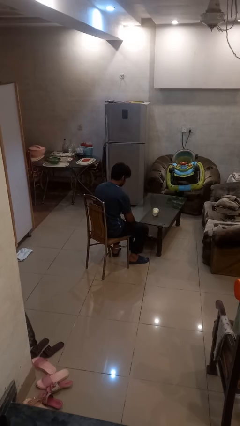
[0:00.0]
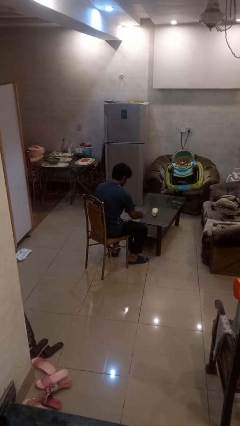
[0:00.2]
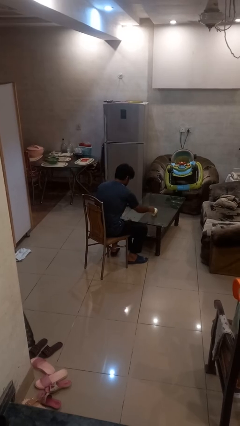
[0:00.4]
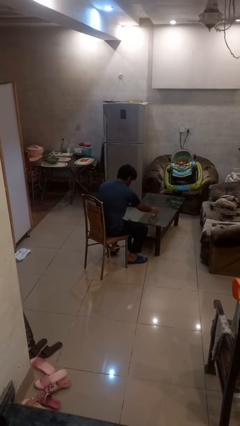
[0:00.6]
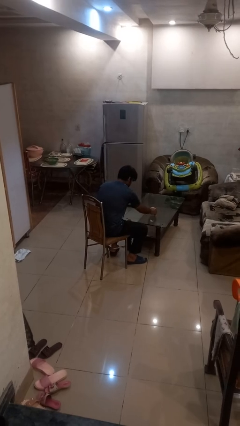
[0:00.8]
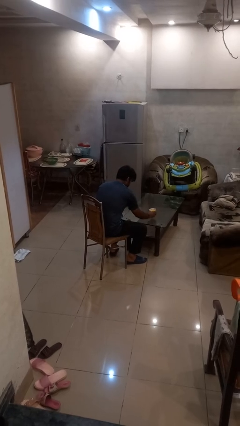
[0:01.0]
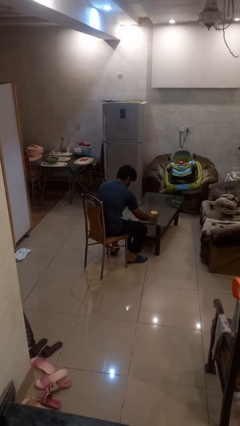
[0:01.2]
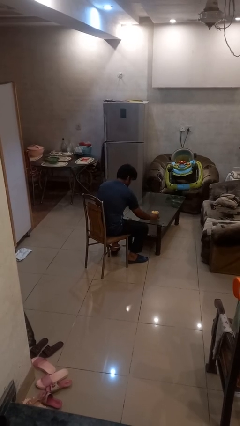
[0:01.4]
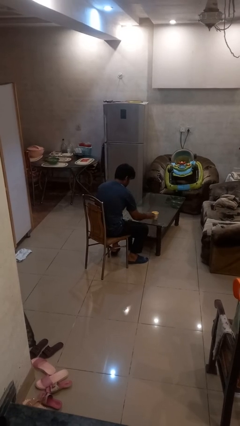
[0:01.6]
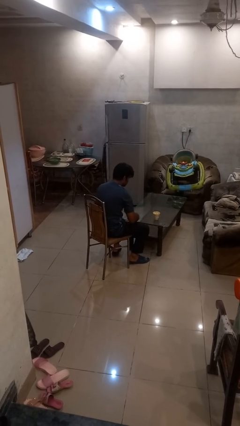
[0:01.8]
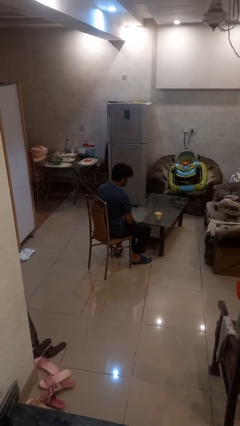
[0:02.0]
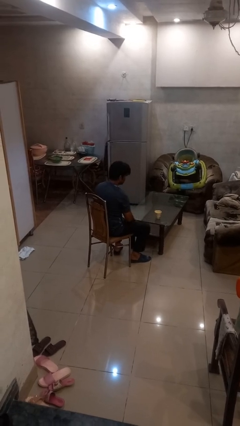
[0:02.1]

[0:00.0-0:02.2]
person sets upright glass

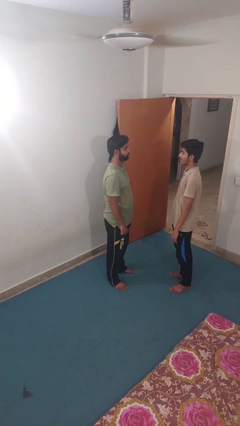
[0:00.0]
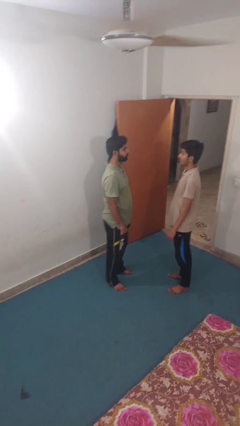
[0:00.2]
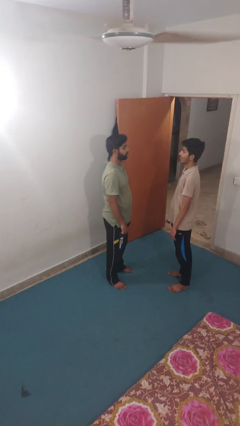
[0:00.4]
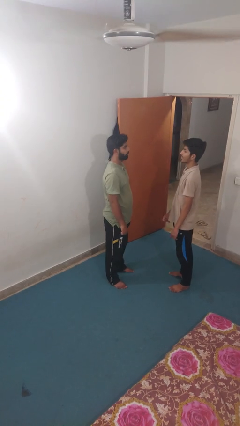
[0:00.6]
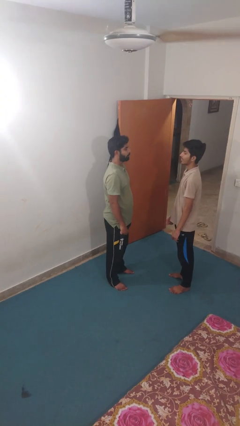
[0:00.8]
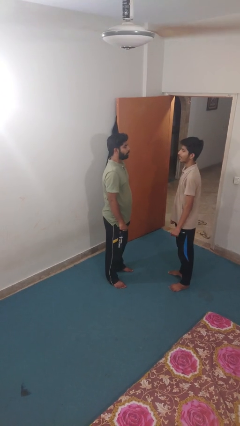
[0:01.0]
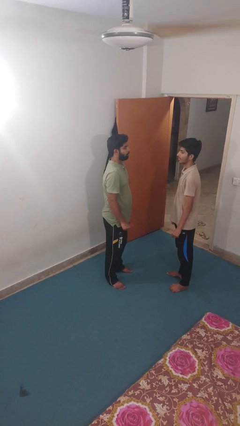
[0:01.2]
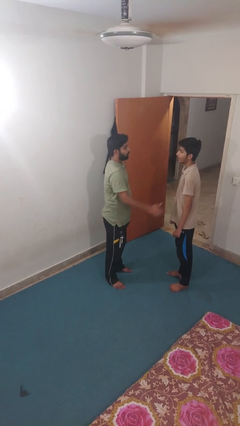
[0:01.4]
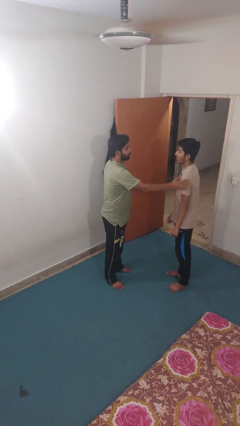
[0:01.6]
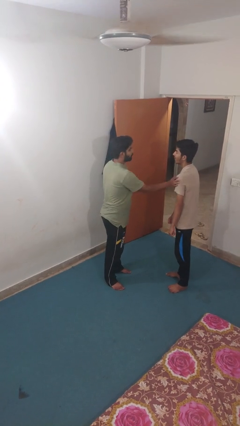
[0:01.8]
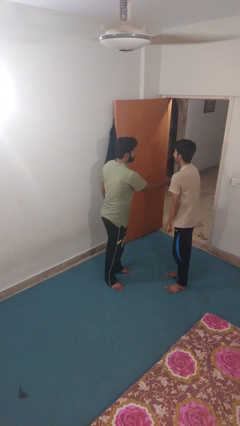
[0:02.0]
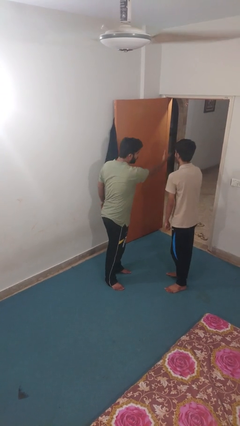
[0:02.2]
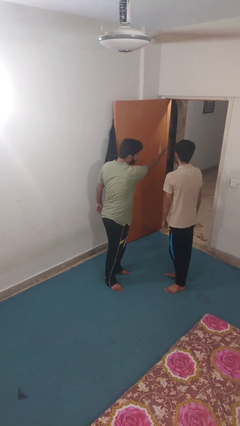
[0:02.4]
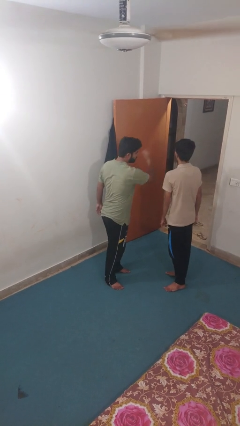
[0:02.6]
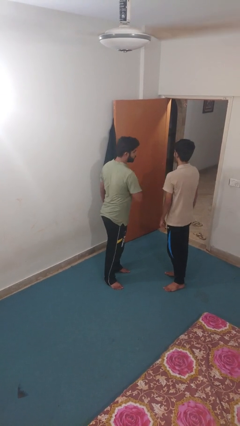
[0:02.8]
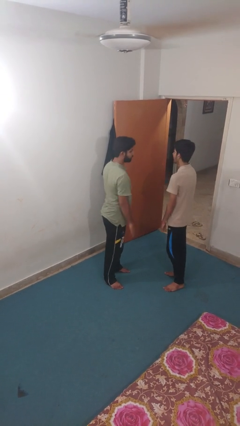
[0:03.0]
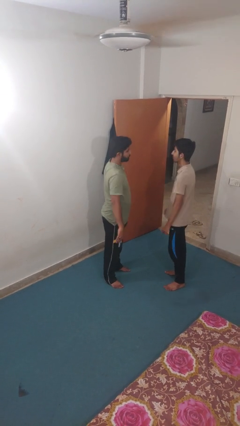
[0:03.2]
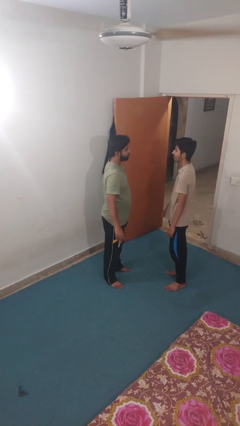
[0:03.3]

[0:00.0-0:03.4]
person shoves person

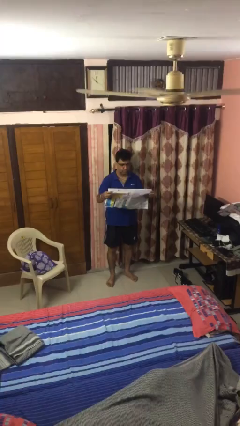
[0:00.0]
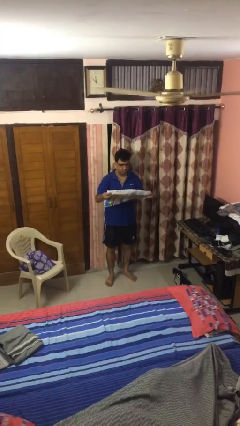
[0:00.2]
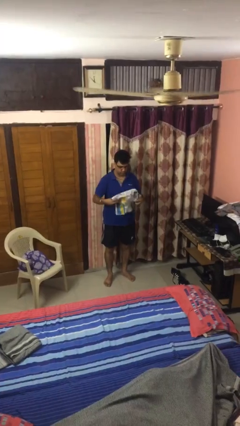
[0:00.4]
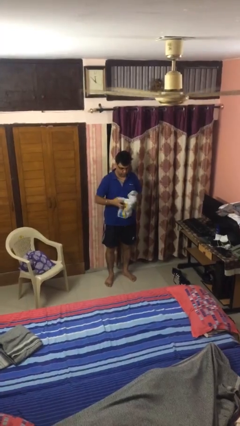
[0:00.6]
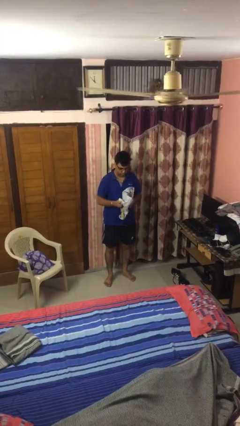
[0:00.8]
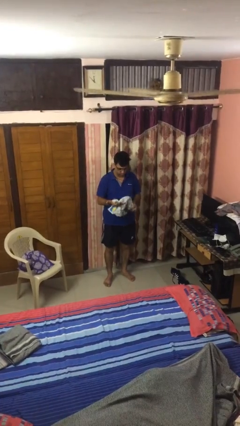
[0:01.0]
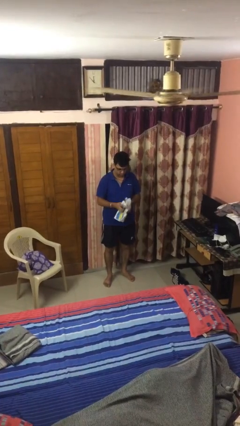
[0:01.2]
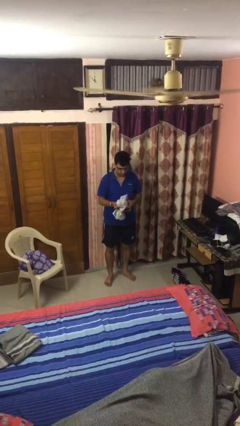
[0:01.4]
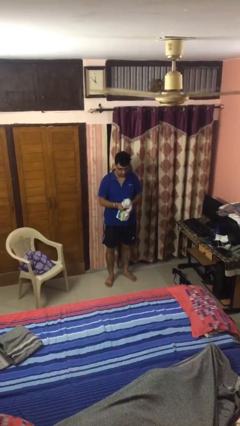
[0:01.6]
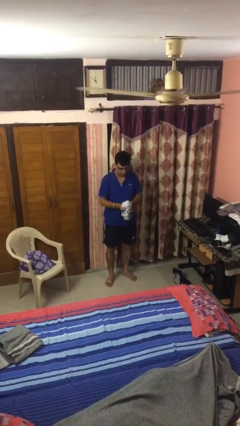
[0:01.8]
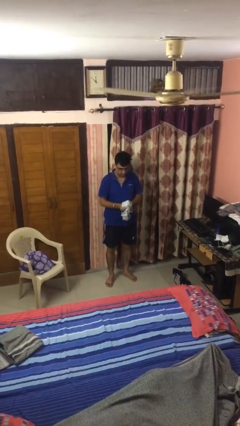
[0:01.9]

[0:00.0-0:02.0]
person crumples paper

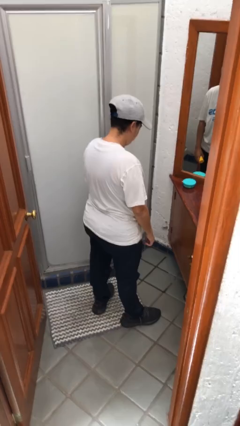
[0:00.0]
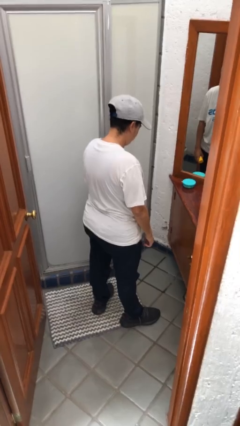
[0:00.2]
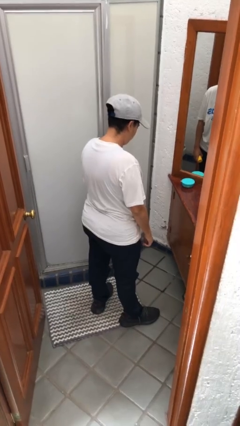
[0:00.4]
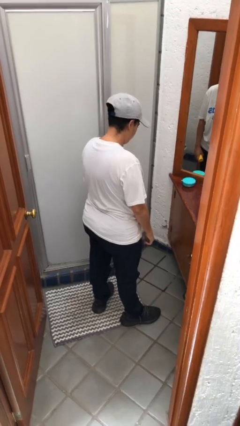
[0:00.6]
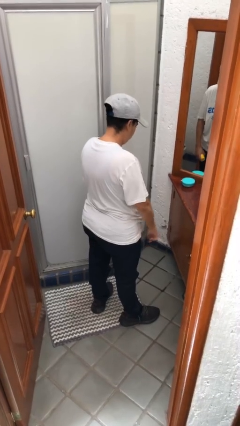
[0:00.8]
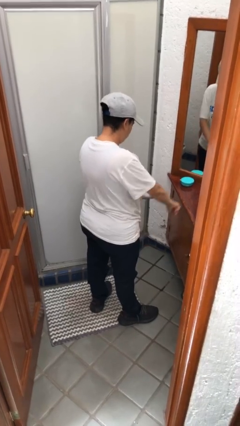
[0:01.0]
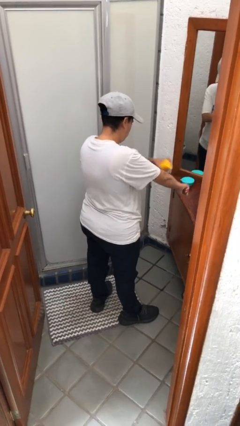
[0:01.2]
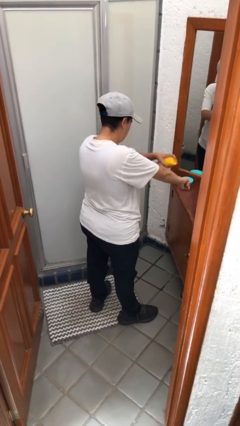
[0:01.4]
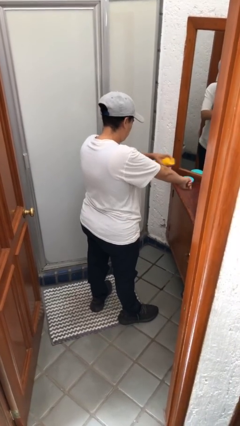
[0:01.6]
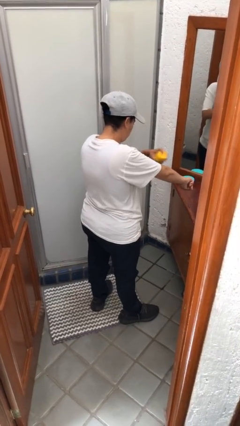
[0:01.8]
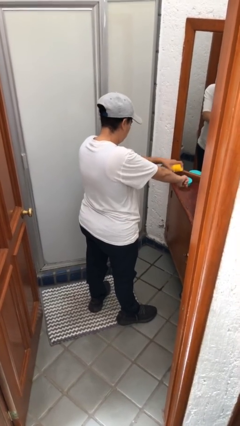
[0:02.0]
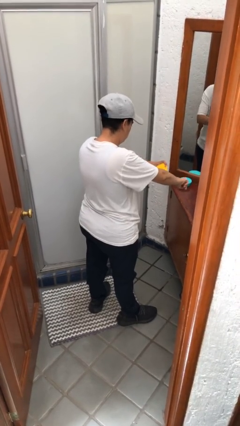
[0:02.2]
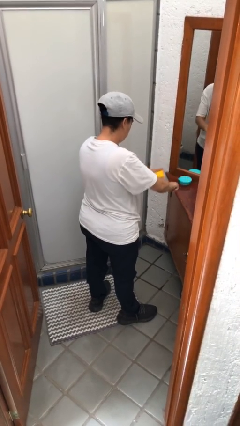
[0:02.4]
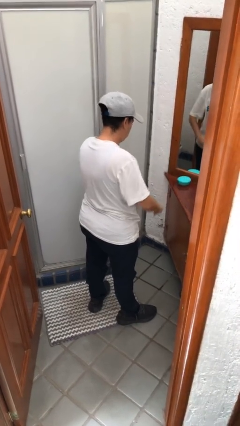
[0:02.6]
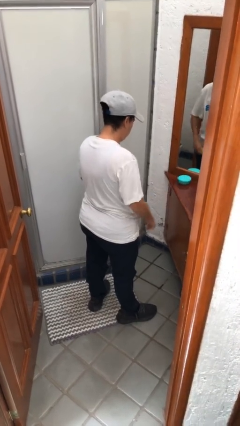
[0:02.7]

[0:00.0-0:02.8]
person applies sunscreen

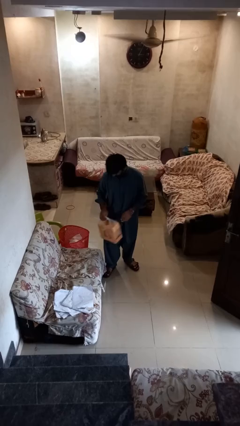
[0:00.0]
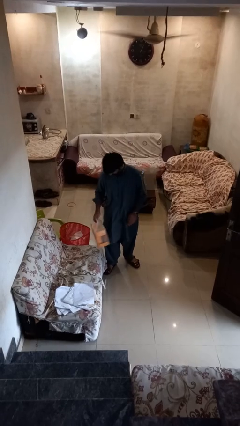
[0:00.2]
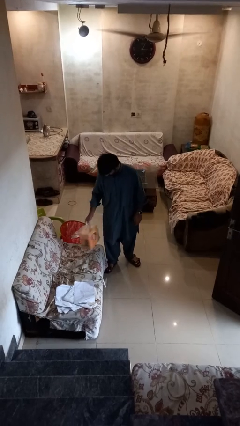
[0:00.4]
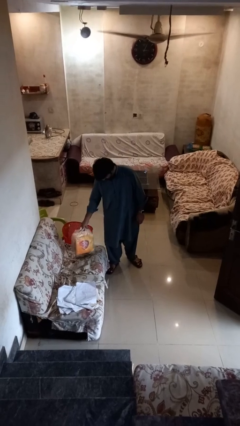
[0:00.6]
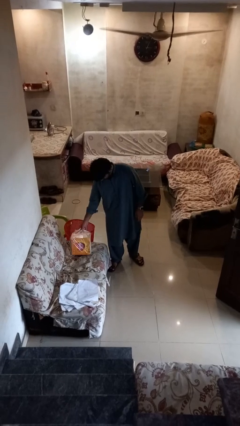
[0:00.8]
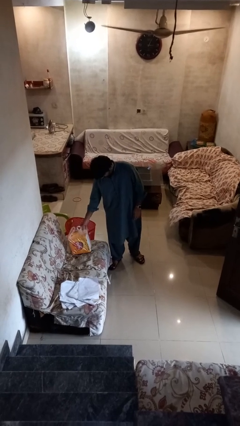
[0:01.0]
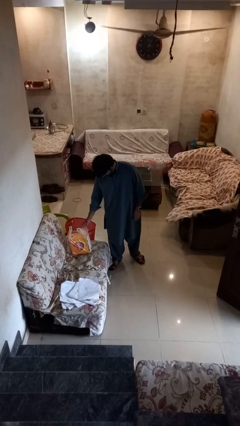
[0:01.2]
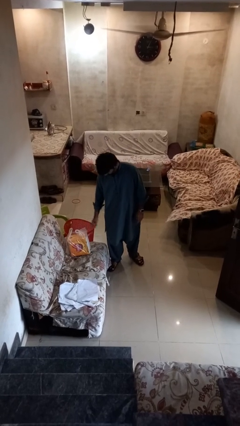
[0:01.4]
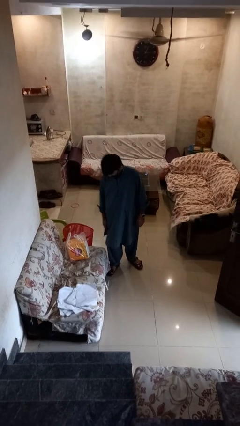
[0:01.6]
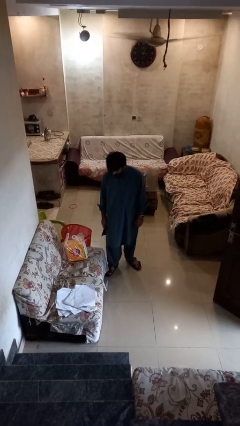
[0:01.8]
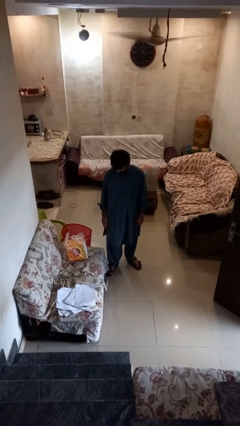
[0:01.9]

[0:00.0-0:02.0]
person puts down object on couch

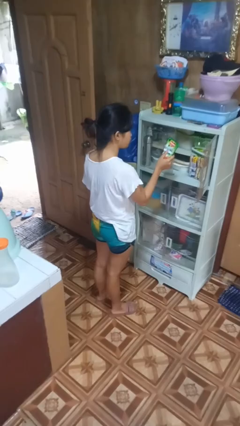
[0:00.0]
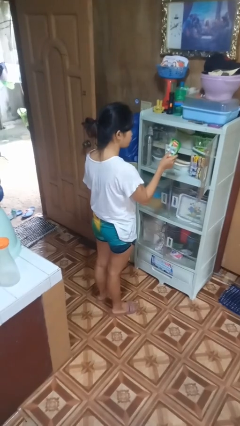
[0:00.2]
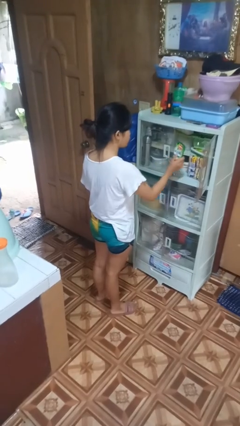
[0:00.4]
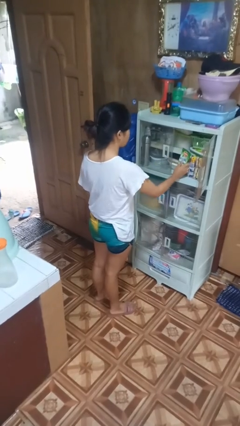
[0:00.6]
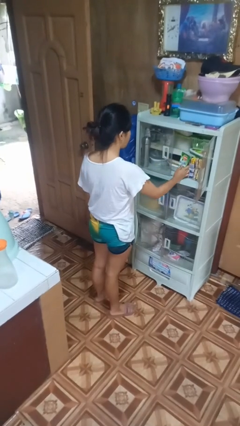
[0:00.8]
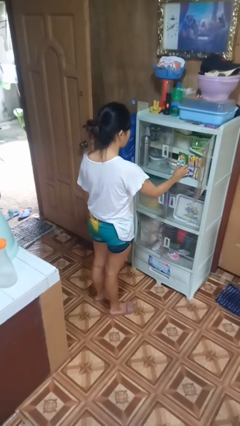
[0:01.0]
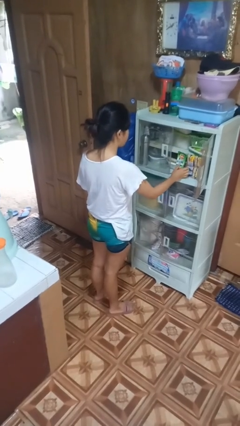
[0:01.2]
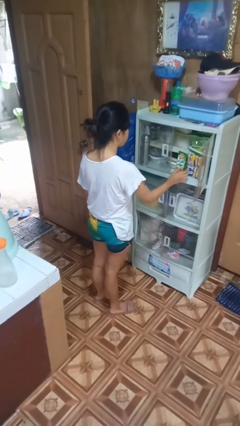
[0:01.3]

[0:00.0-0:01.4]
person puts down object into cabinet

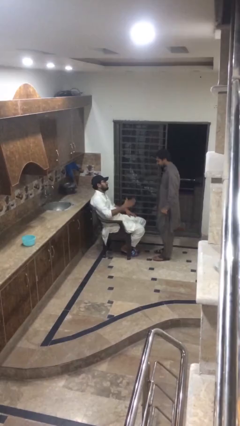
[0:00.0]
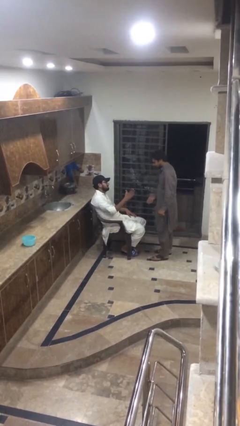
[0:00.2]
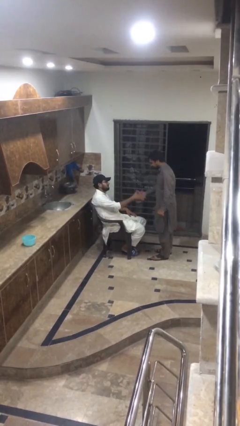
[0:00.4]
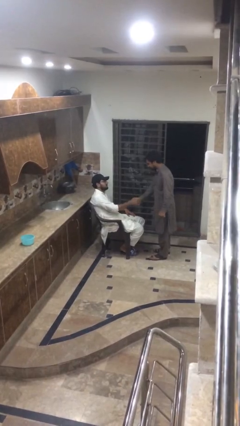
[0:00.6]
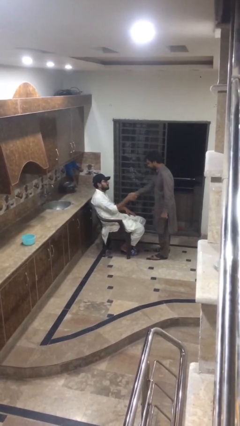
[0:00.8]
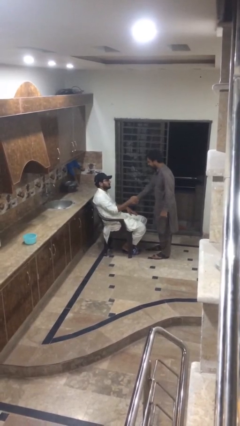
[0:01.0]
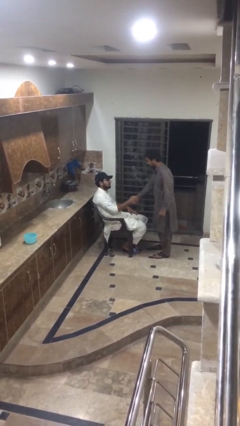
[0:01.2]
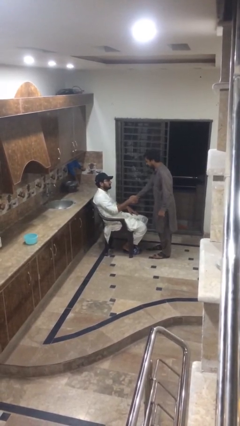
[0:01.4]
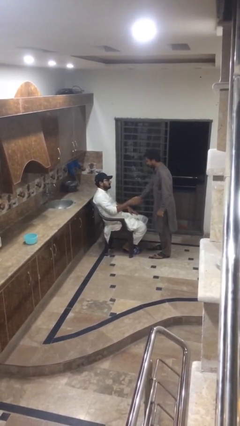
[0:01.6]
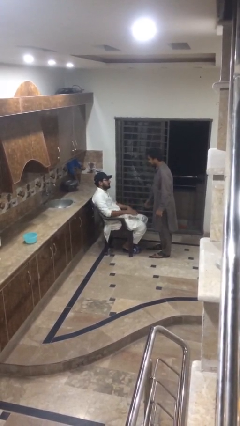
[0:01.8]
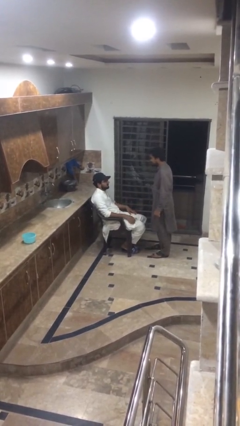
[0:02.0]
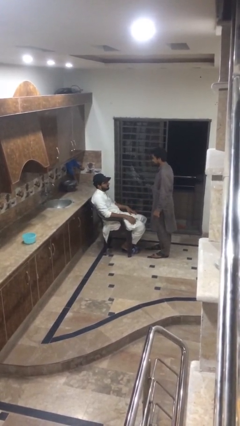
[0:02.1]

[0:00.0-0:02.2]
person shakes hand

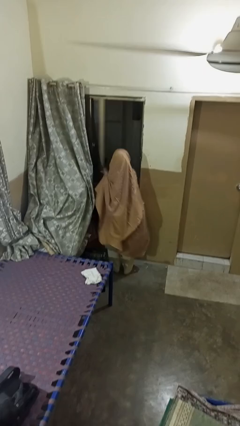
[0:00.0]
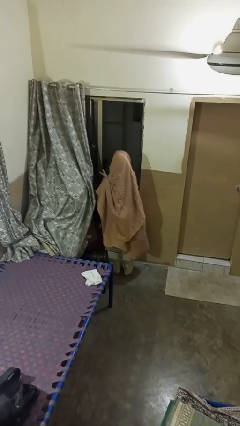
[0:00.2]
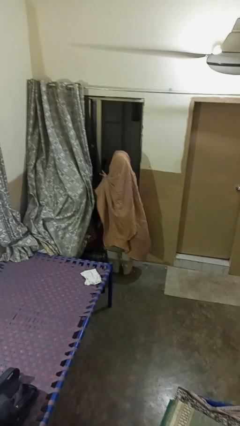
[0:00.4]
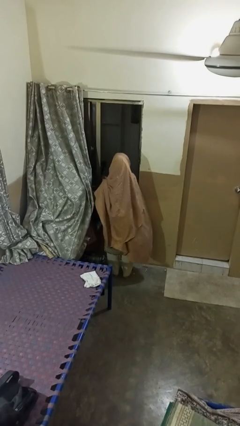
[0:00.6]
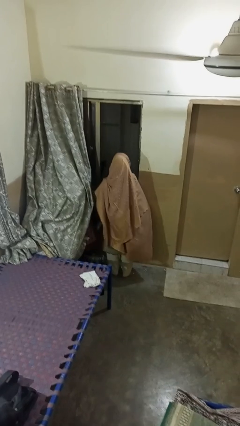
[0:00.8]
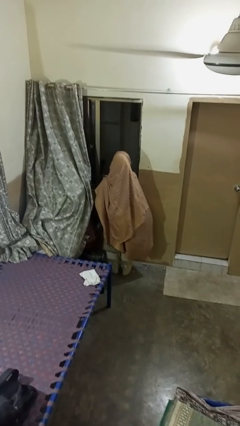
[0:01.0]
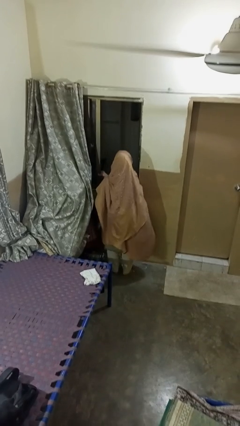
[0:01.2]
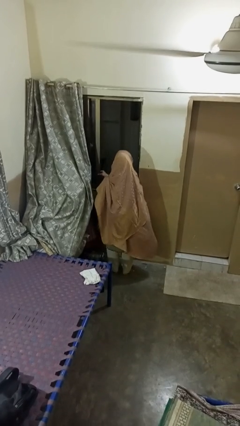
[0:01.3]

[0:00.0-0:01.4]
person closes home window
